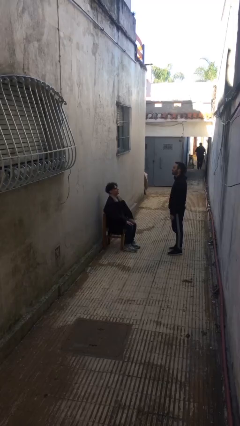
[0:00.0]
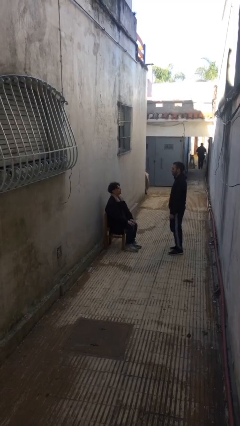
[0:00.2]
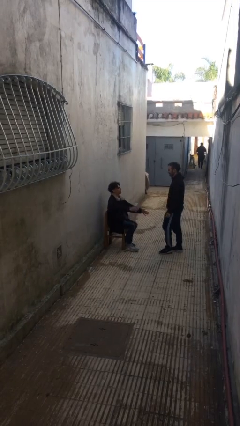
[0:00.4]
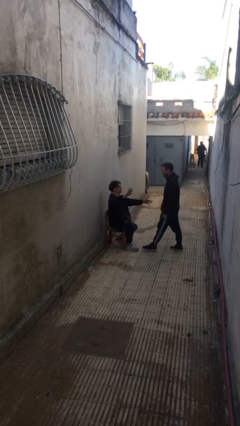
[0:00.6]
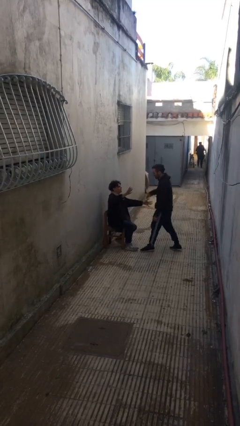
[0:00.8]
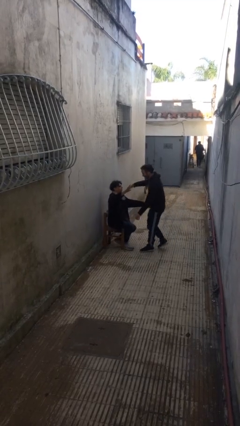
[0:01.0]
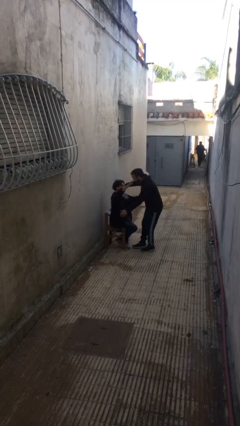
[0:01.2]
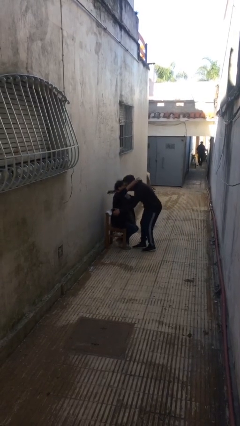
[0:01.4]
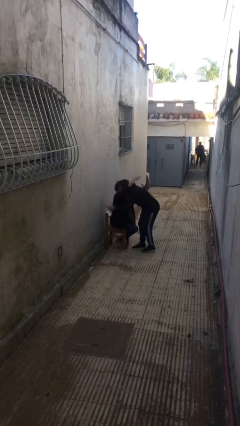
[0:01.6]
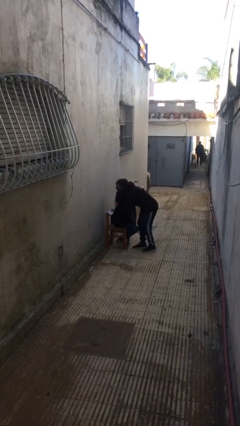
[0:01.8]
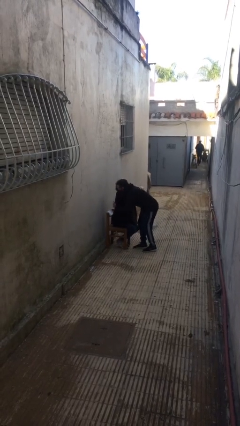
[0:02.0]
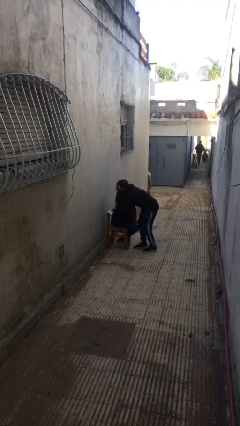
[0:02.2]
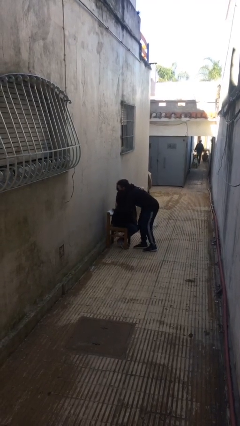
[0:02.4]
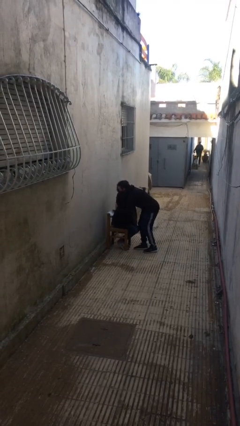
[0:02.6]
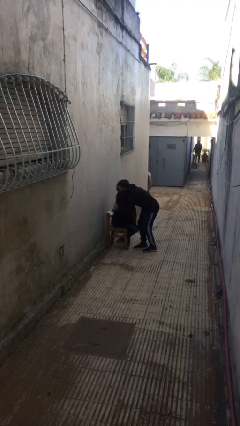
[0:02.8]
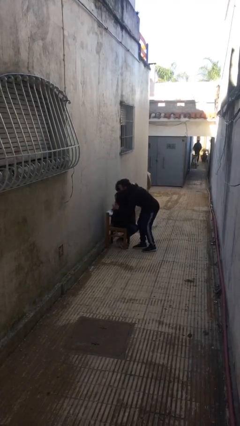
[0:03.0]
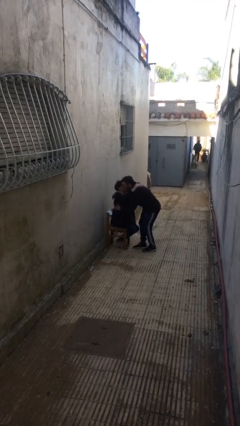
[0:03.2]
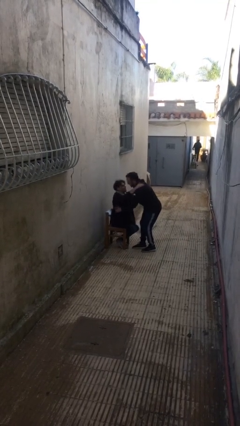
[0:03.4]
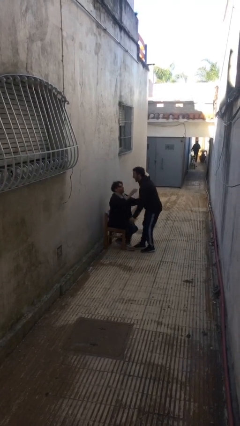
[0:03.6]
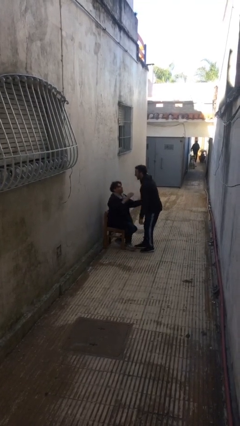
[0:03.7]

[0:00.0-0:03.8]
person embraces person

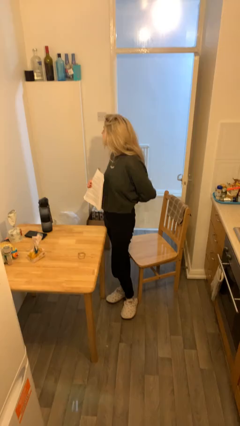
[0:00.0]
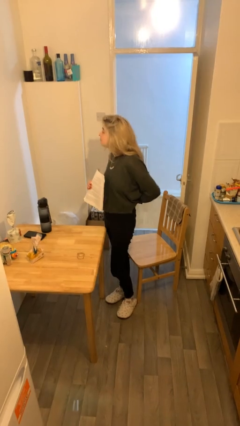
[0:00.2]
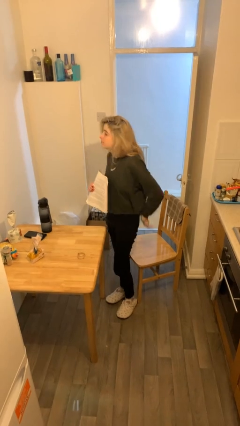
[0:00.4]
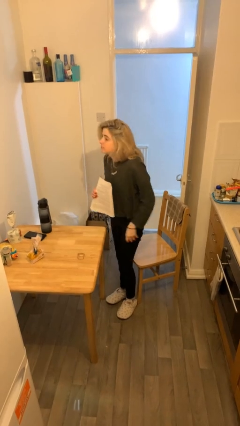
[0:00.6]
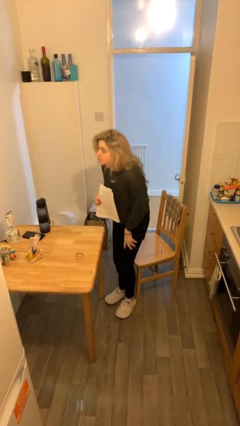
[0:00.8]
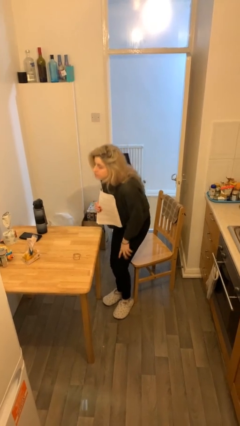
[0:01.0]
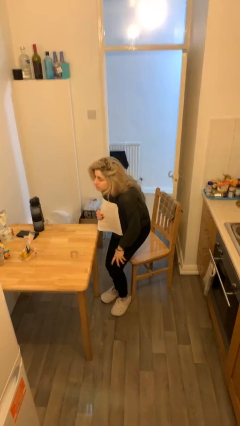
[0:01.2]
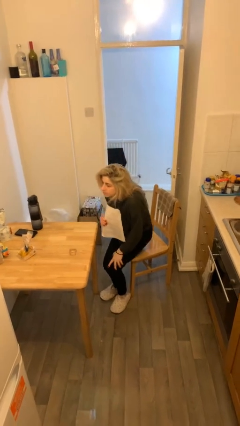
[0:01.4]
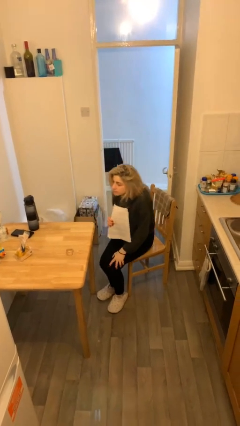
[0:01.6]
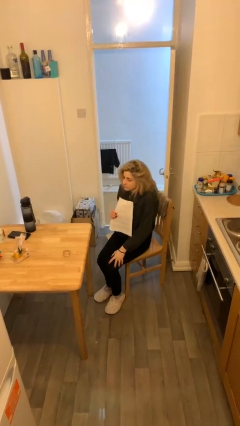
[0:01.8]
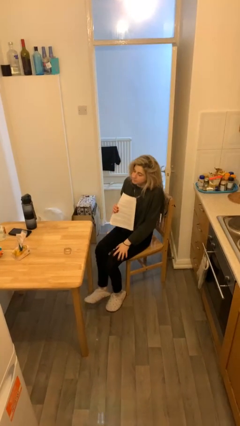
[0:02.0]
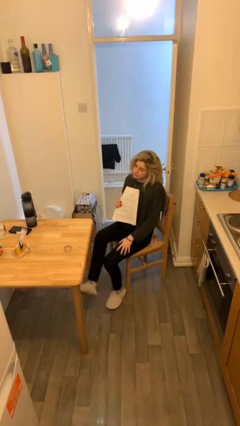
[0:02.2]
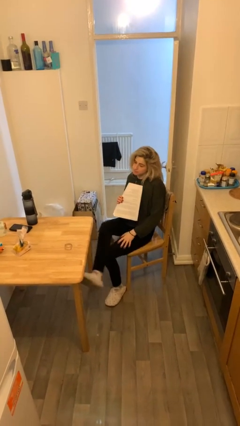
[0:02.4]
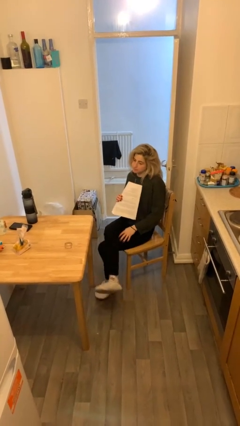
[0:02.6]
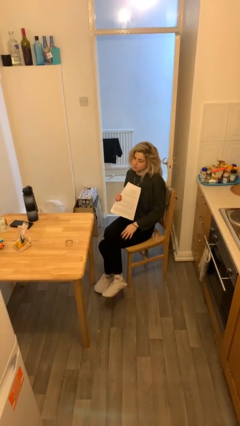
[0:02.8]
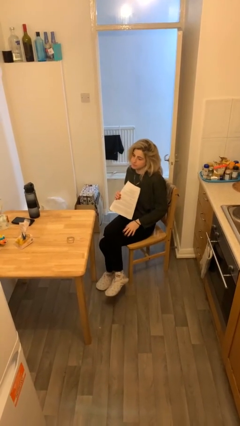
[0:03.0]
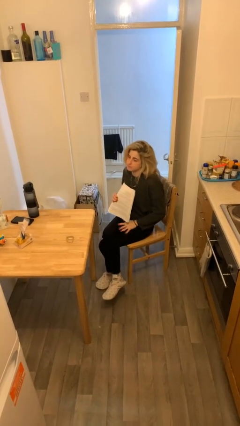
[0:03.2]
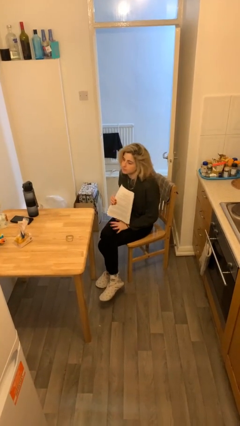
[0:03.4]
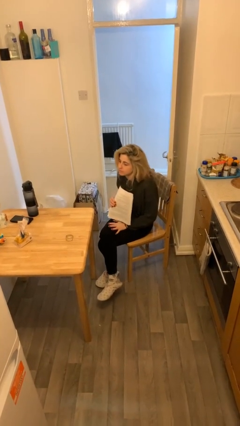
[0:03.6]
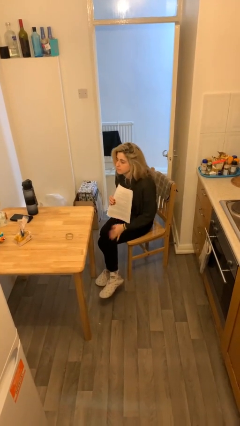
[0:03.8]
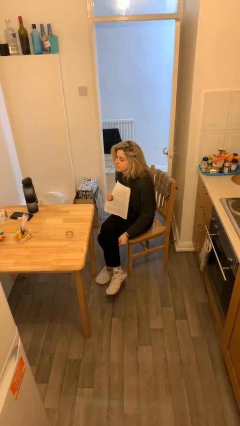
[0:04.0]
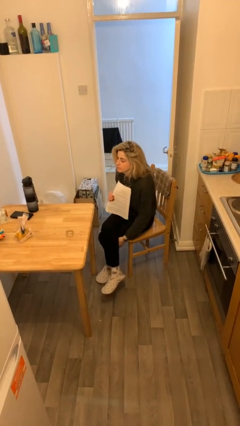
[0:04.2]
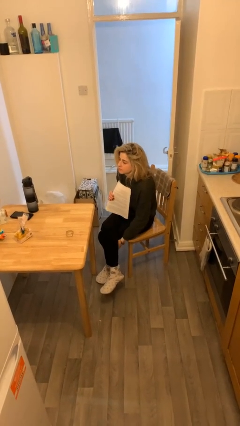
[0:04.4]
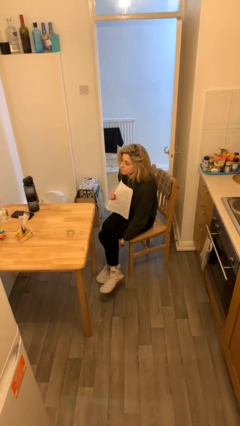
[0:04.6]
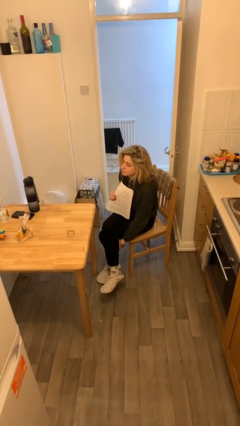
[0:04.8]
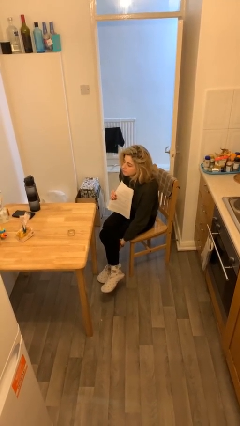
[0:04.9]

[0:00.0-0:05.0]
person sits down

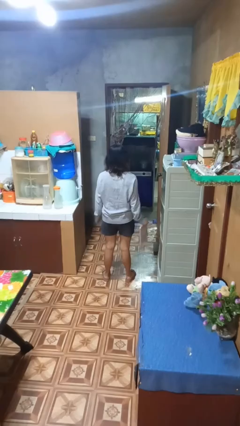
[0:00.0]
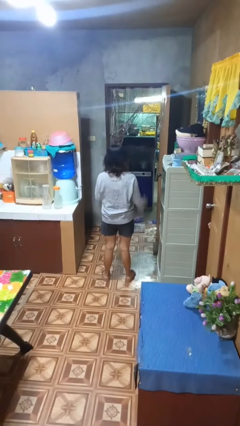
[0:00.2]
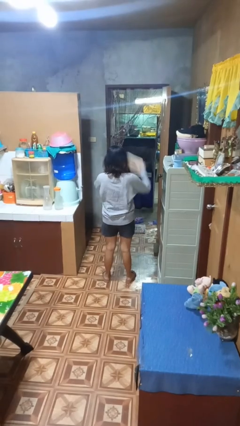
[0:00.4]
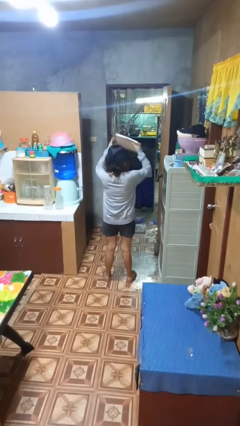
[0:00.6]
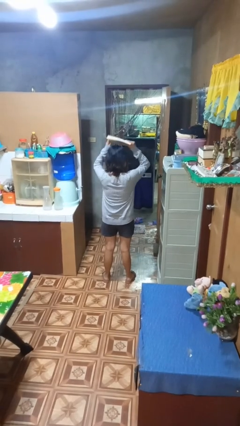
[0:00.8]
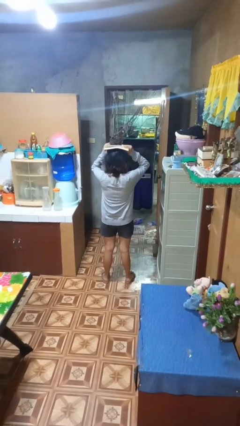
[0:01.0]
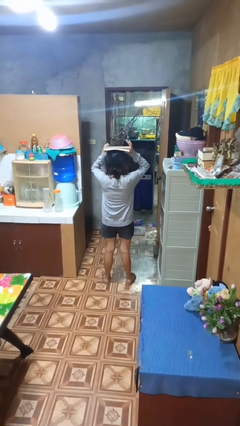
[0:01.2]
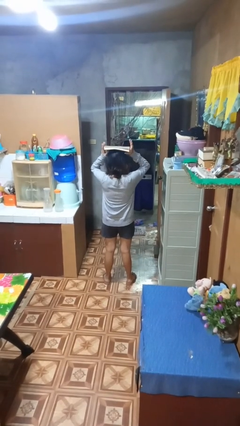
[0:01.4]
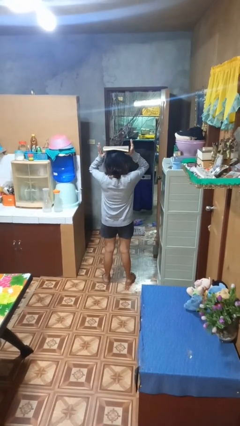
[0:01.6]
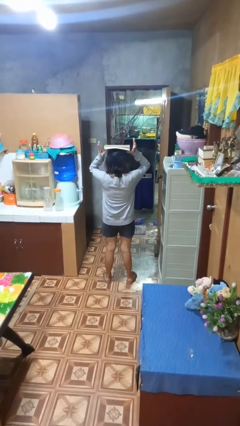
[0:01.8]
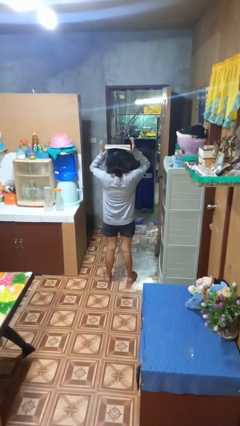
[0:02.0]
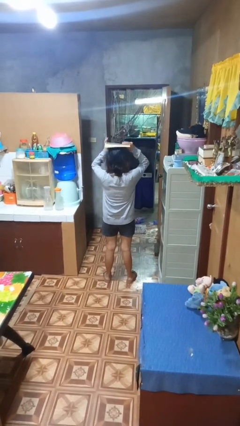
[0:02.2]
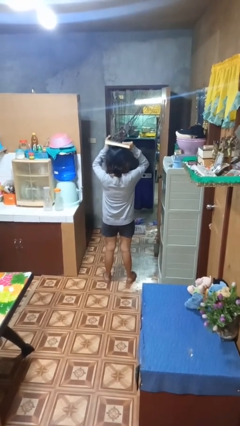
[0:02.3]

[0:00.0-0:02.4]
person holds object above head

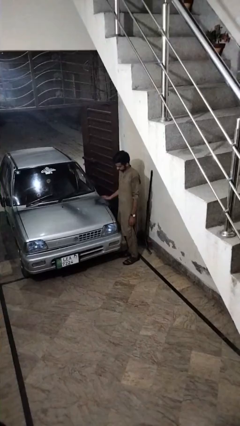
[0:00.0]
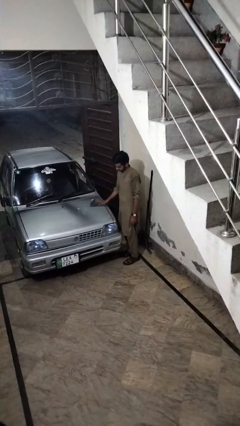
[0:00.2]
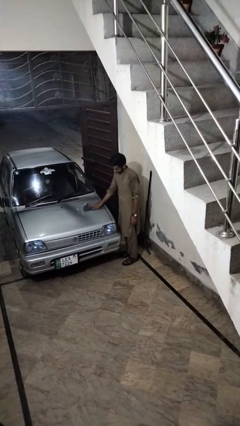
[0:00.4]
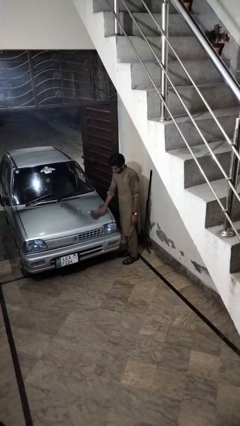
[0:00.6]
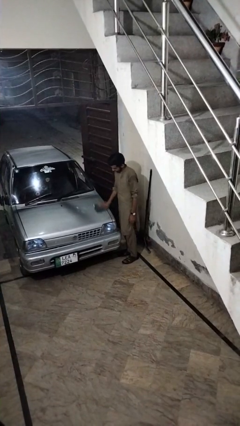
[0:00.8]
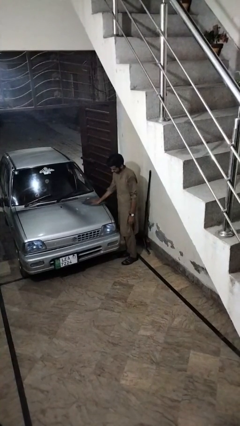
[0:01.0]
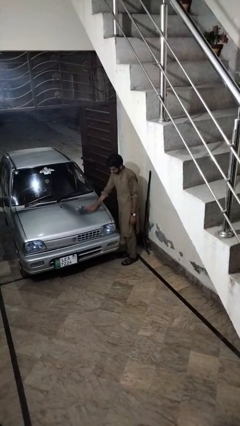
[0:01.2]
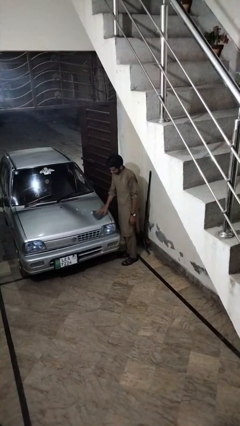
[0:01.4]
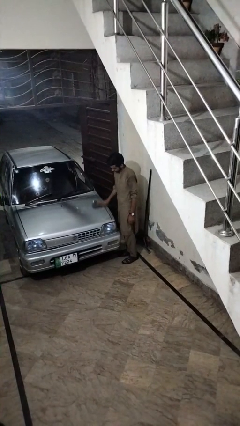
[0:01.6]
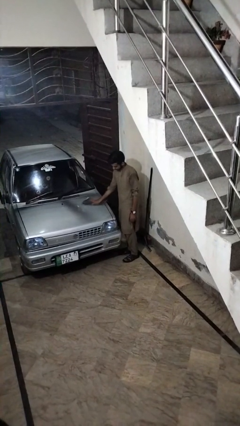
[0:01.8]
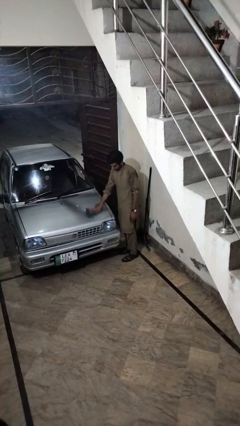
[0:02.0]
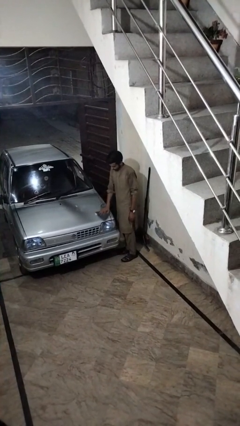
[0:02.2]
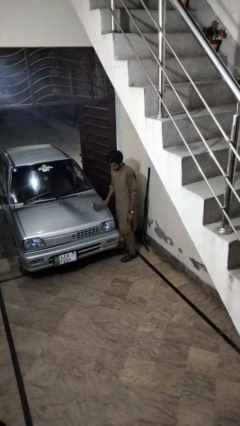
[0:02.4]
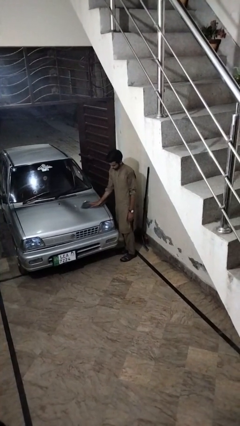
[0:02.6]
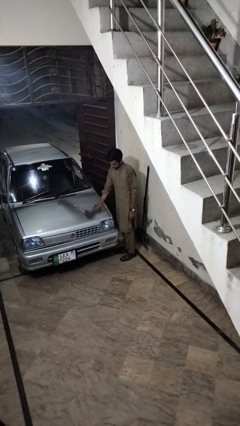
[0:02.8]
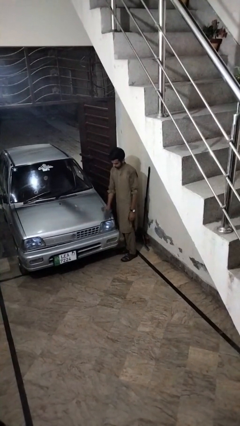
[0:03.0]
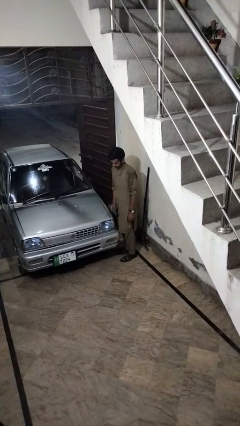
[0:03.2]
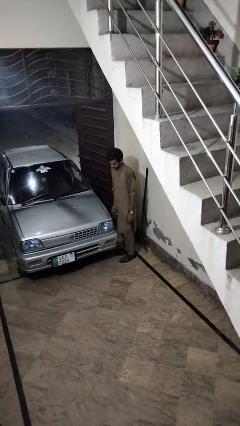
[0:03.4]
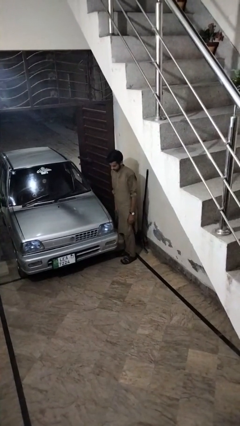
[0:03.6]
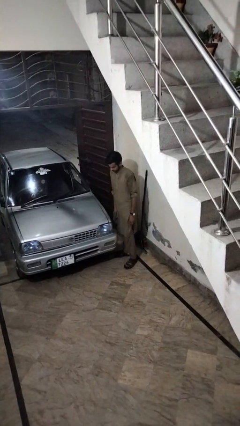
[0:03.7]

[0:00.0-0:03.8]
person polishes car with rag

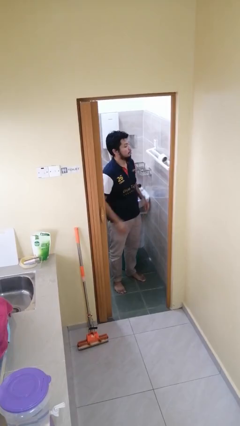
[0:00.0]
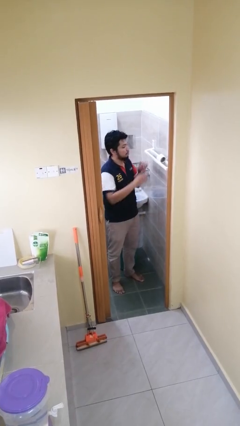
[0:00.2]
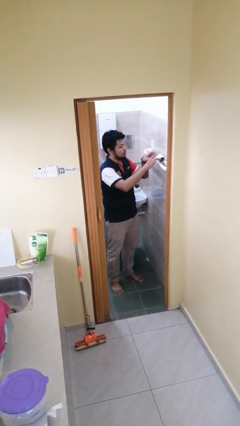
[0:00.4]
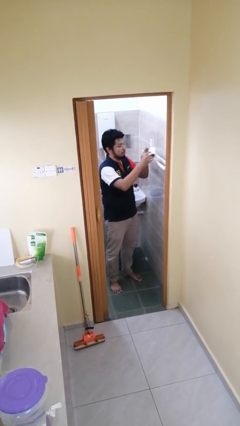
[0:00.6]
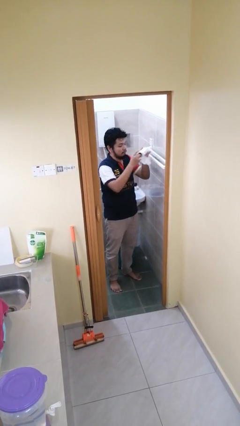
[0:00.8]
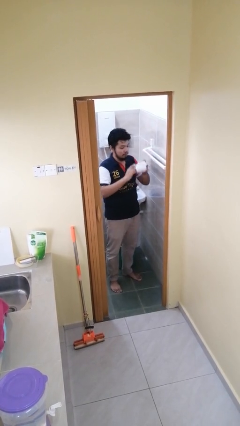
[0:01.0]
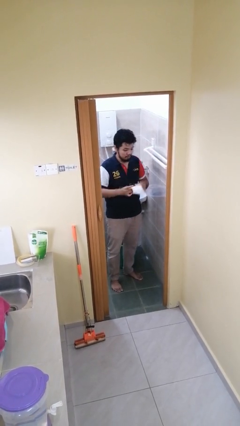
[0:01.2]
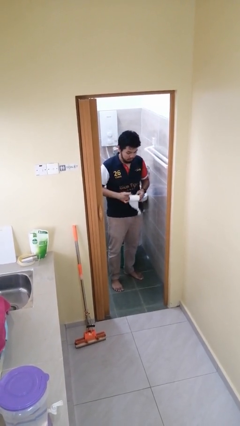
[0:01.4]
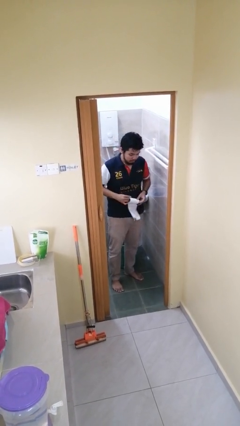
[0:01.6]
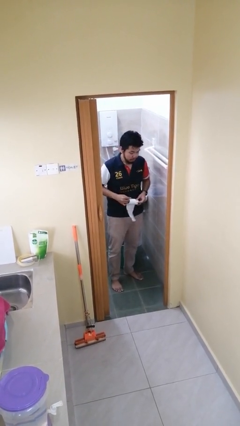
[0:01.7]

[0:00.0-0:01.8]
person picks up object from countertop

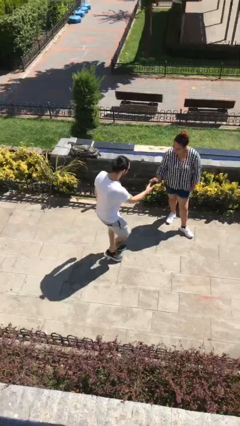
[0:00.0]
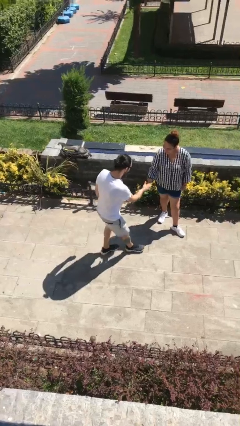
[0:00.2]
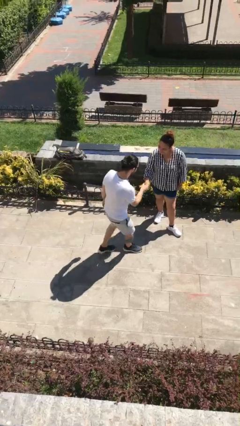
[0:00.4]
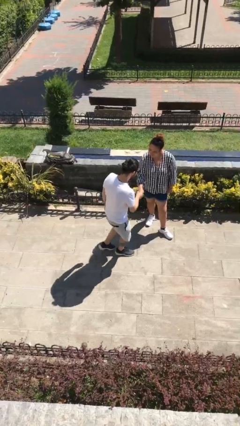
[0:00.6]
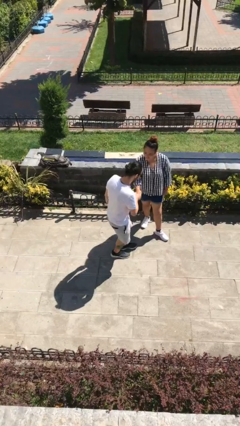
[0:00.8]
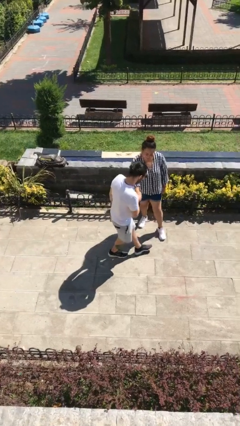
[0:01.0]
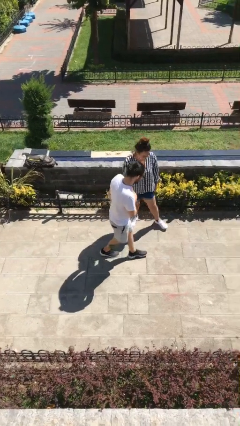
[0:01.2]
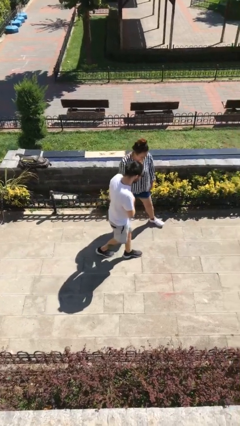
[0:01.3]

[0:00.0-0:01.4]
person shakes hand
